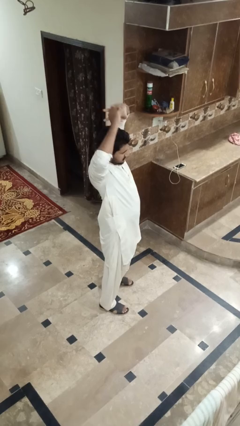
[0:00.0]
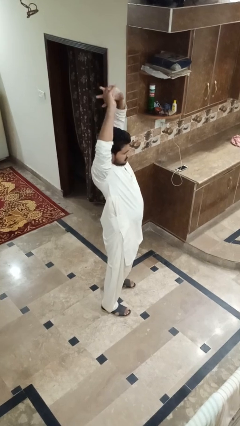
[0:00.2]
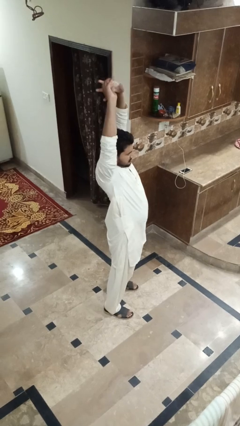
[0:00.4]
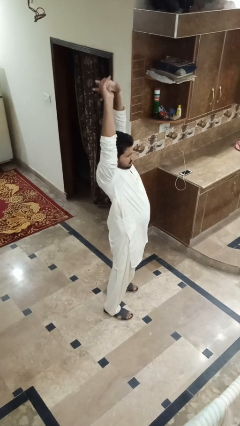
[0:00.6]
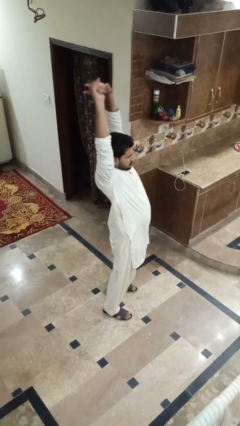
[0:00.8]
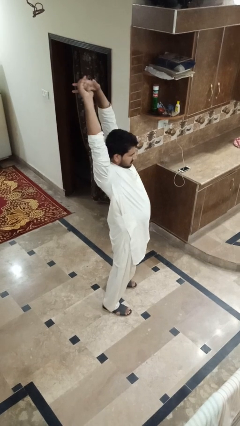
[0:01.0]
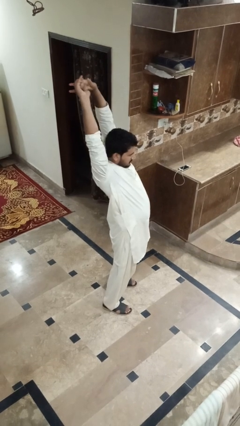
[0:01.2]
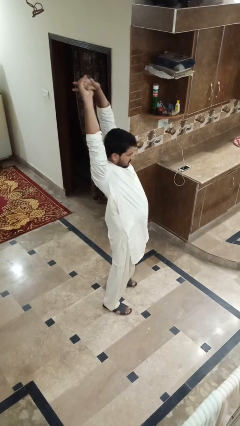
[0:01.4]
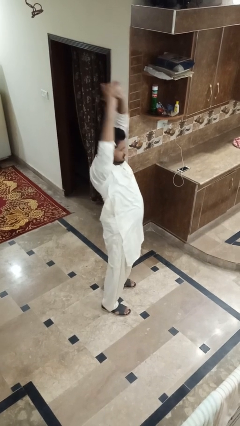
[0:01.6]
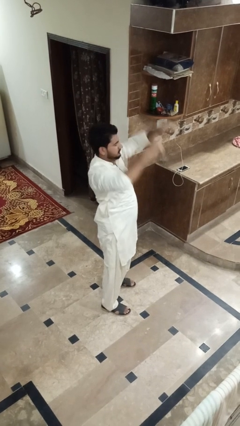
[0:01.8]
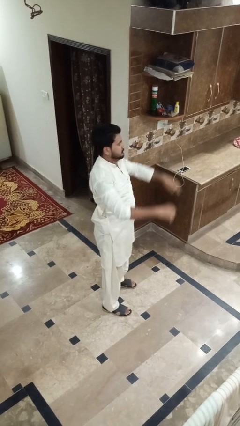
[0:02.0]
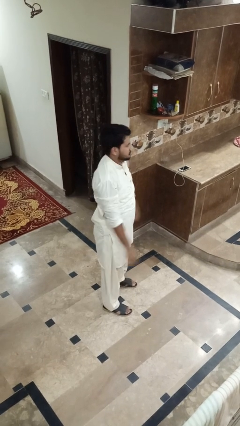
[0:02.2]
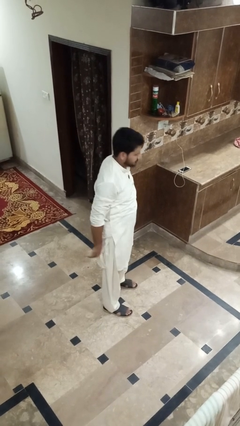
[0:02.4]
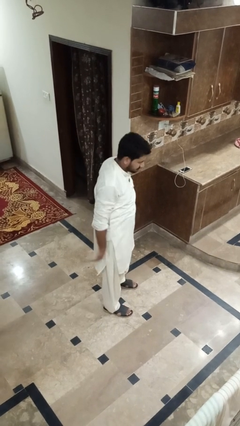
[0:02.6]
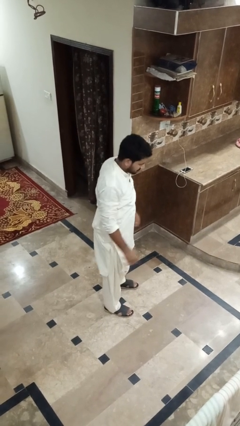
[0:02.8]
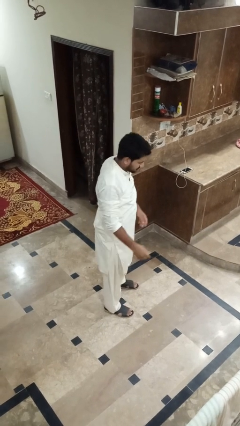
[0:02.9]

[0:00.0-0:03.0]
person stretches arms over head

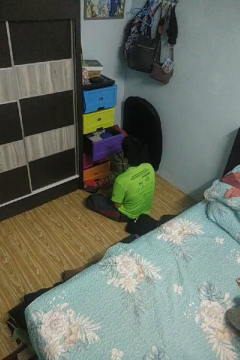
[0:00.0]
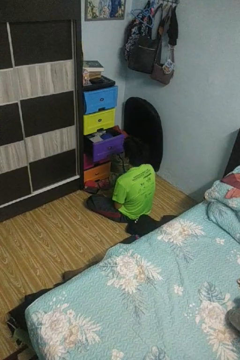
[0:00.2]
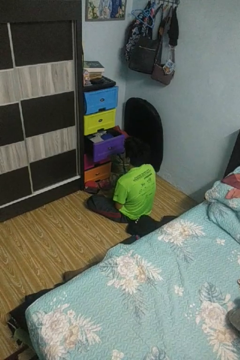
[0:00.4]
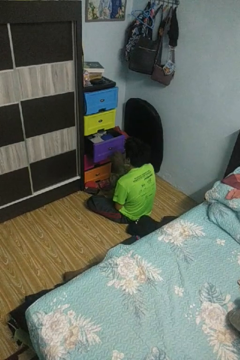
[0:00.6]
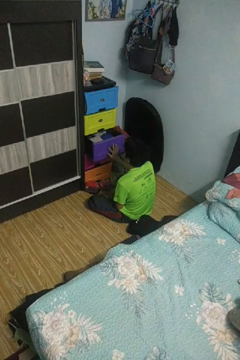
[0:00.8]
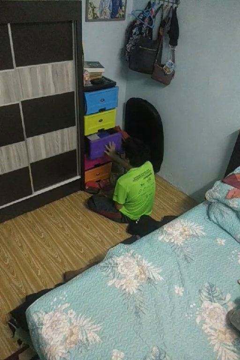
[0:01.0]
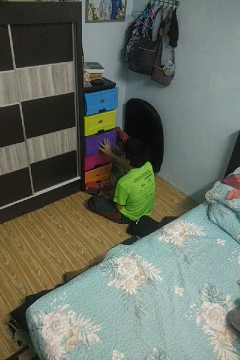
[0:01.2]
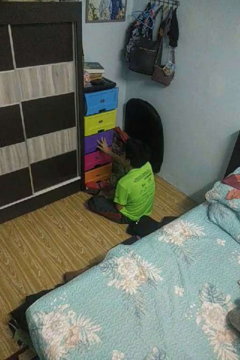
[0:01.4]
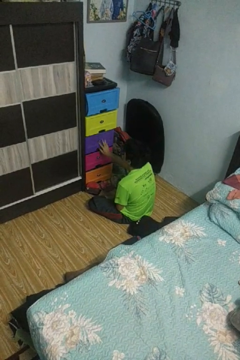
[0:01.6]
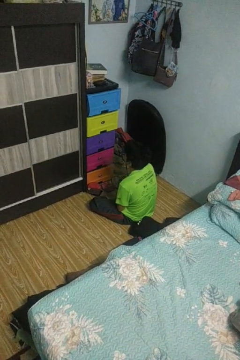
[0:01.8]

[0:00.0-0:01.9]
person closes dresser drawer

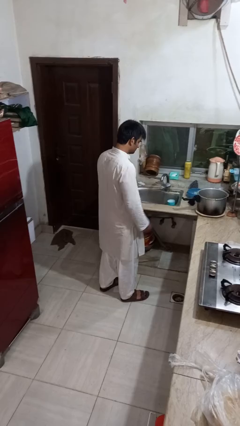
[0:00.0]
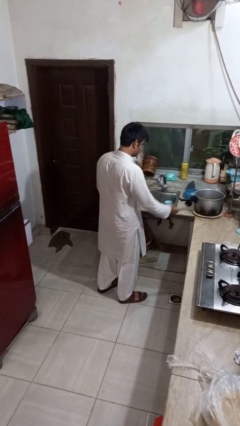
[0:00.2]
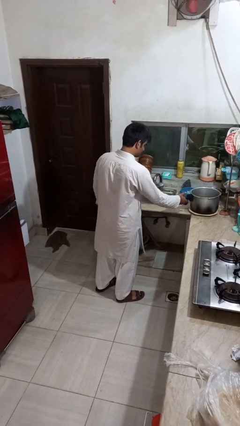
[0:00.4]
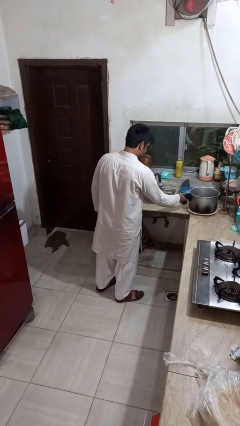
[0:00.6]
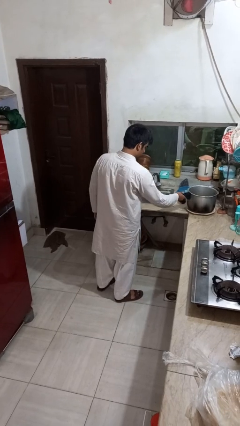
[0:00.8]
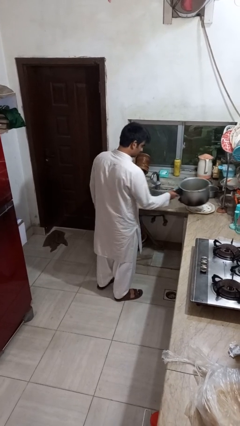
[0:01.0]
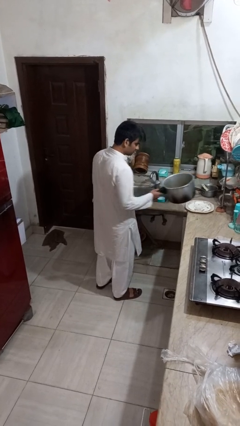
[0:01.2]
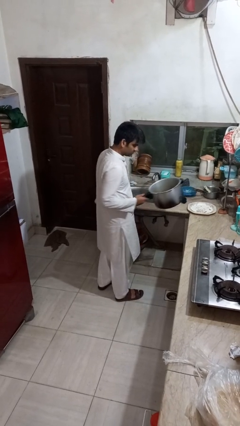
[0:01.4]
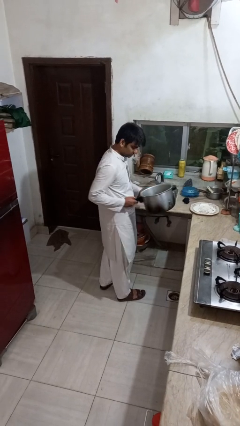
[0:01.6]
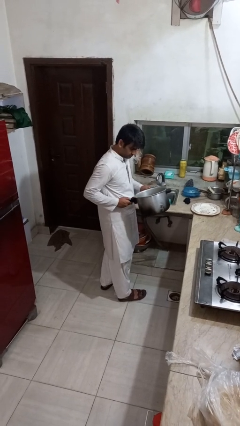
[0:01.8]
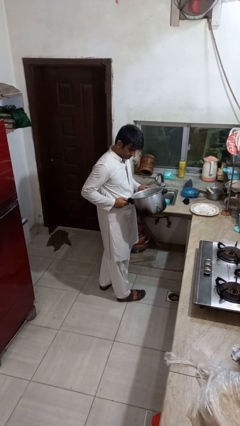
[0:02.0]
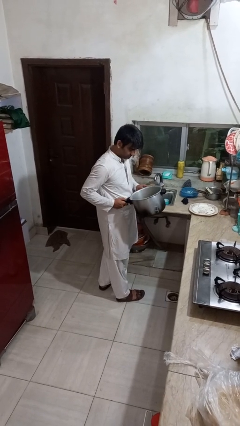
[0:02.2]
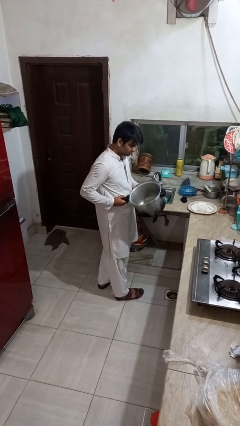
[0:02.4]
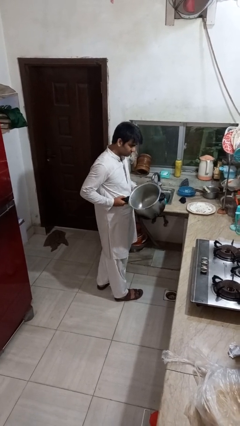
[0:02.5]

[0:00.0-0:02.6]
person picks up object from countertop

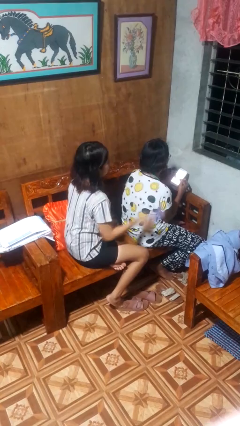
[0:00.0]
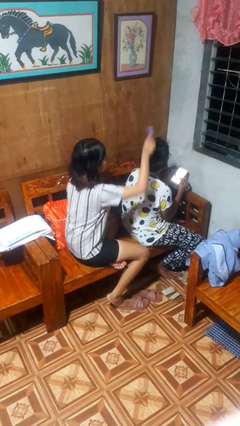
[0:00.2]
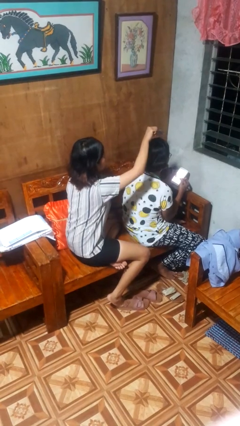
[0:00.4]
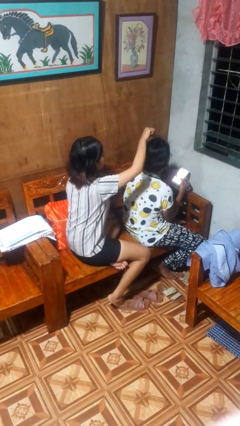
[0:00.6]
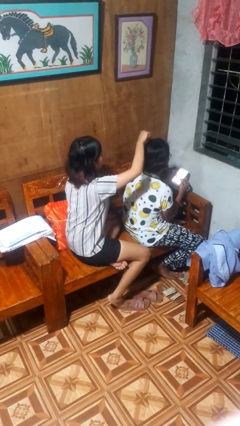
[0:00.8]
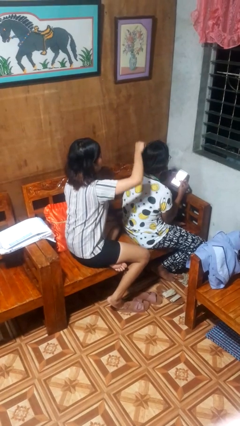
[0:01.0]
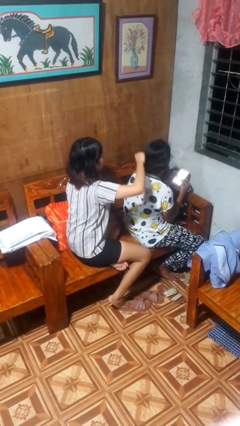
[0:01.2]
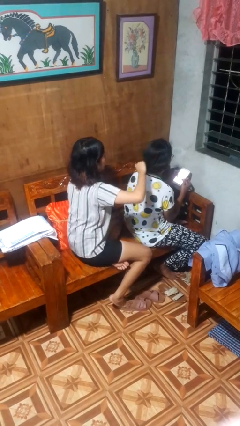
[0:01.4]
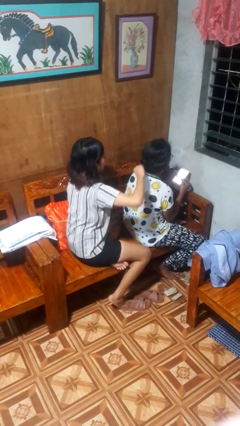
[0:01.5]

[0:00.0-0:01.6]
person brushes hair of person

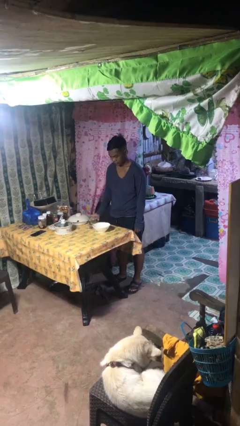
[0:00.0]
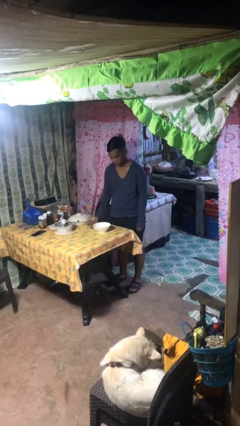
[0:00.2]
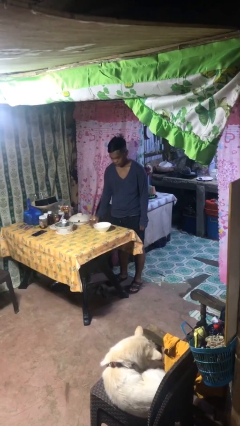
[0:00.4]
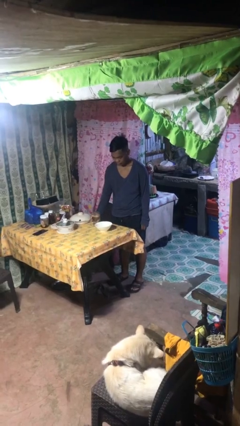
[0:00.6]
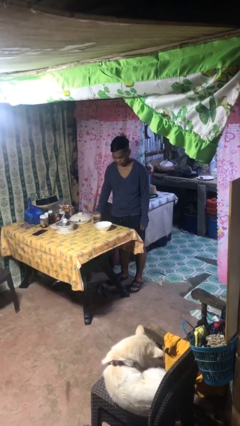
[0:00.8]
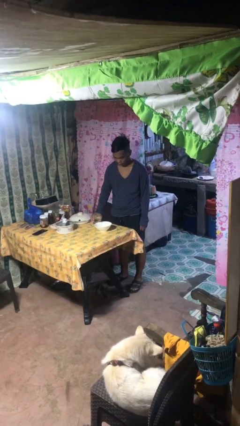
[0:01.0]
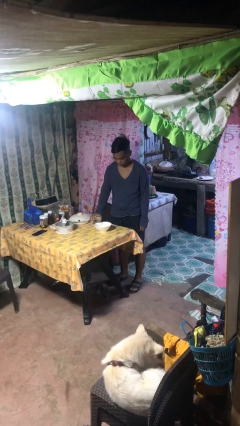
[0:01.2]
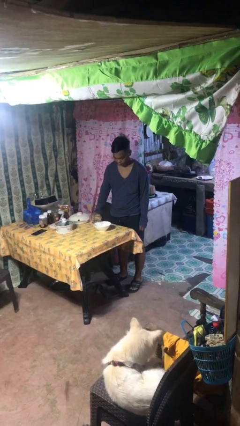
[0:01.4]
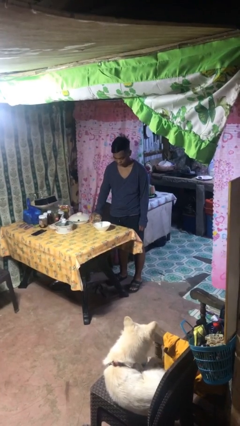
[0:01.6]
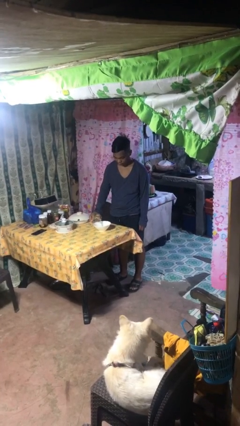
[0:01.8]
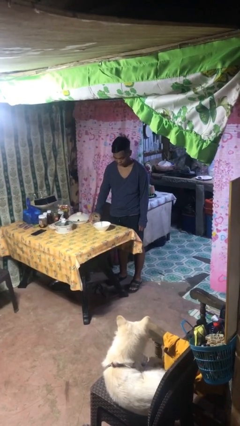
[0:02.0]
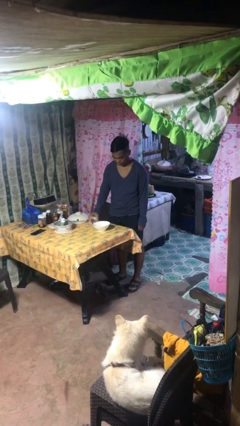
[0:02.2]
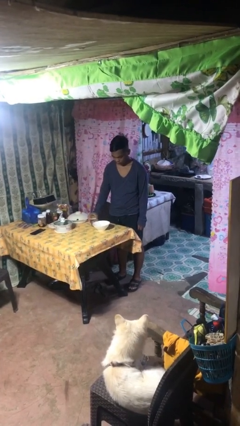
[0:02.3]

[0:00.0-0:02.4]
person pours into bowl

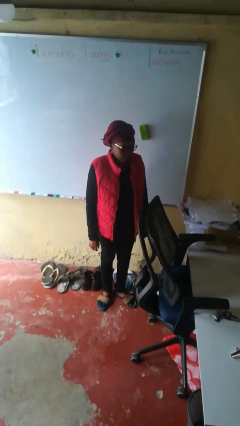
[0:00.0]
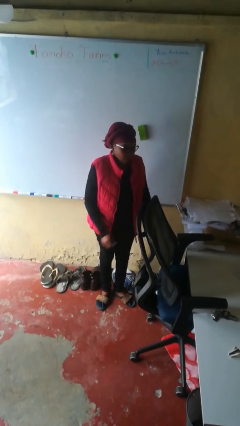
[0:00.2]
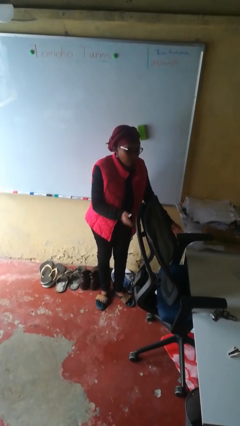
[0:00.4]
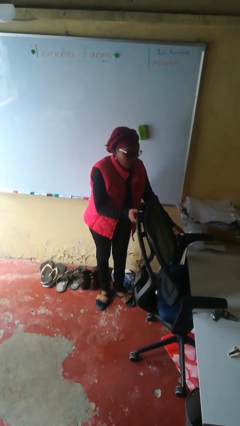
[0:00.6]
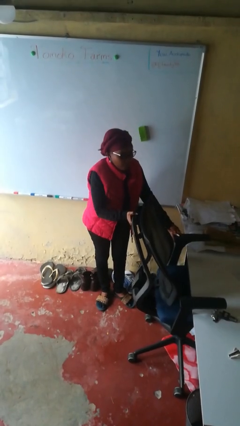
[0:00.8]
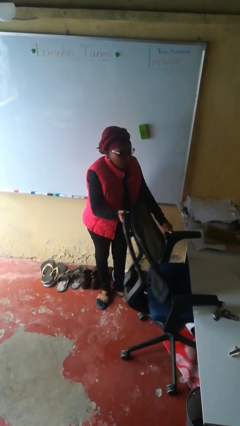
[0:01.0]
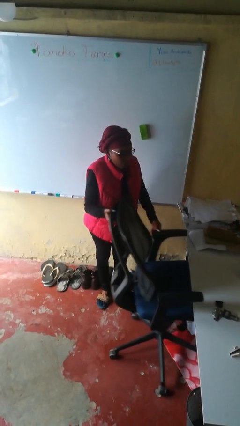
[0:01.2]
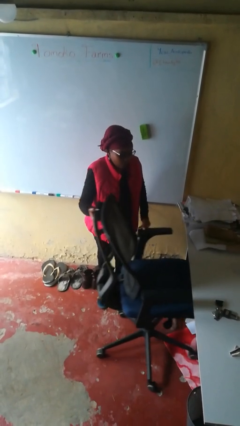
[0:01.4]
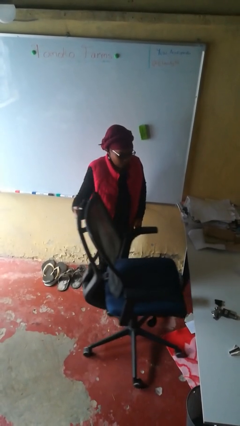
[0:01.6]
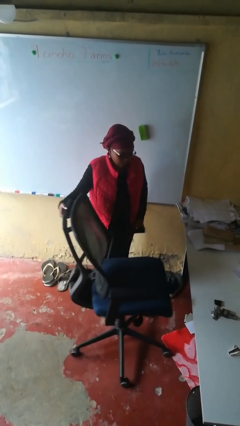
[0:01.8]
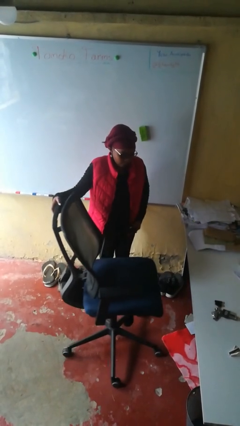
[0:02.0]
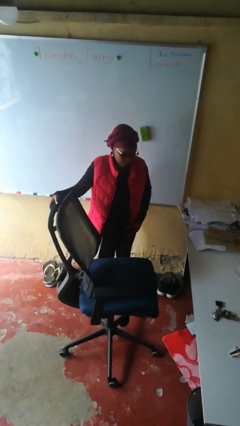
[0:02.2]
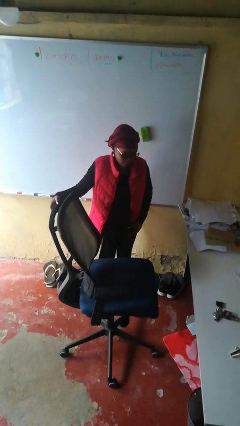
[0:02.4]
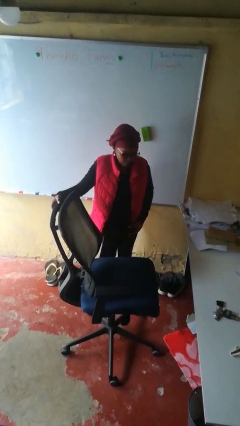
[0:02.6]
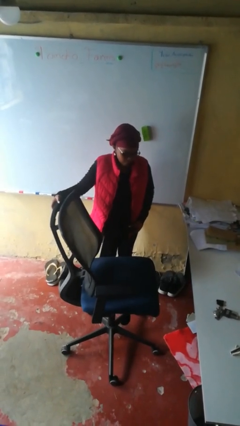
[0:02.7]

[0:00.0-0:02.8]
person pulls out chair

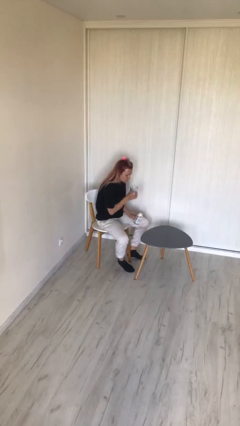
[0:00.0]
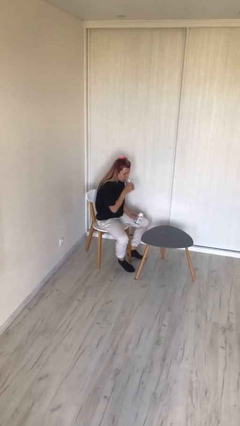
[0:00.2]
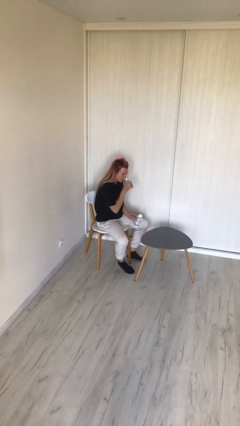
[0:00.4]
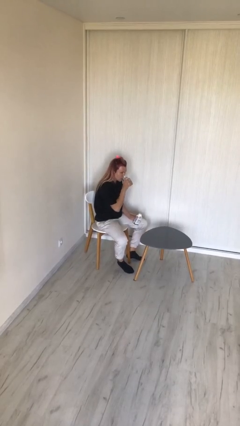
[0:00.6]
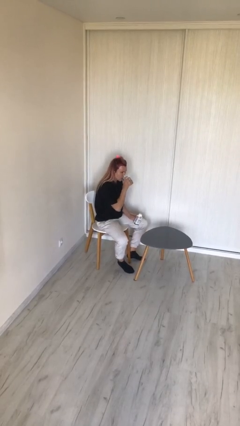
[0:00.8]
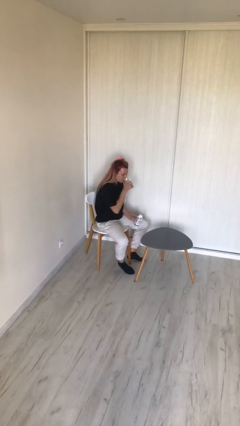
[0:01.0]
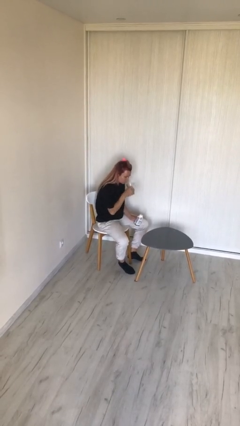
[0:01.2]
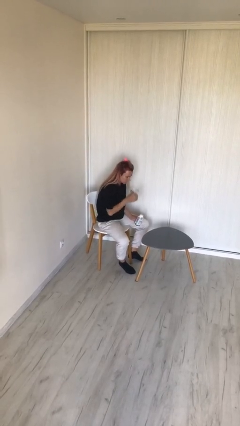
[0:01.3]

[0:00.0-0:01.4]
person drinks from cup

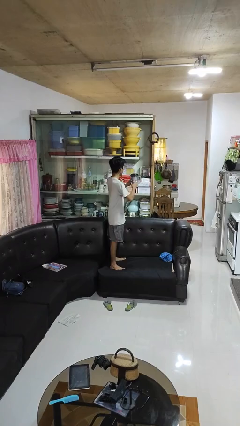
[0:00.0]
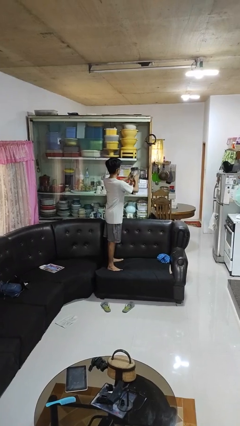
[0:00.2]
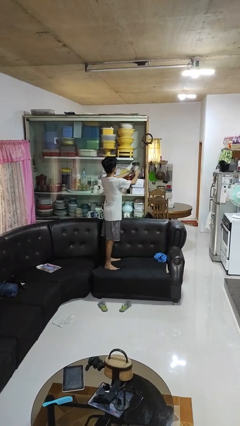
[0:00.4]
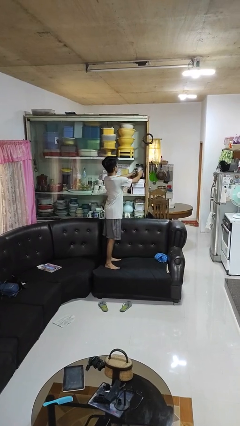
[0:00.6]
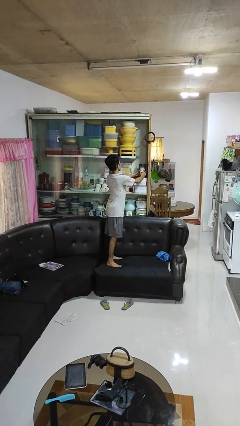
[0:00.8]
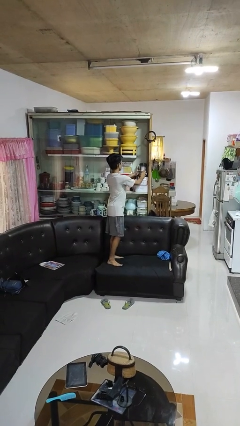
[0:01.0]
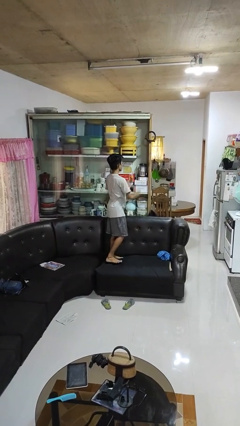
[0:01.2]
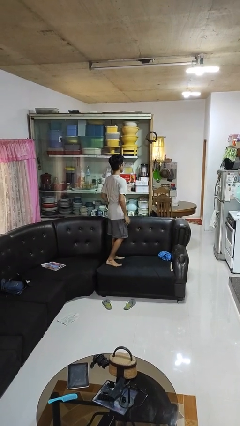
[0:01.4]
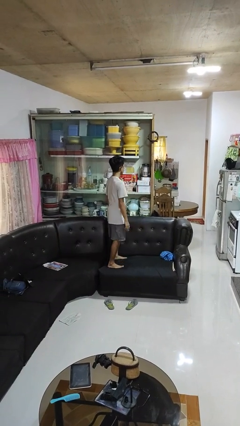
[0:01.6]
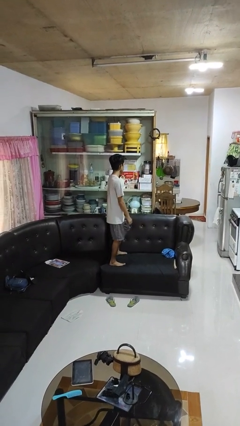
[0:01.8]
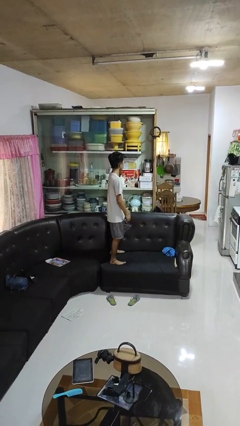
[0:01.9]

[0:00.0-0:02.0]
person puts down object into cabinet
